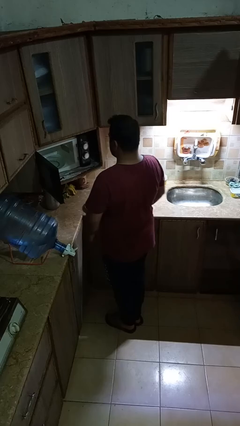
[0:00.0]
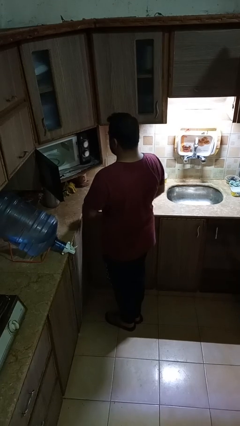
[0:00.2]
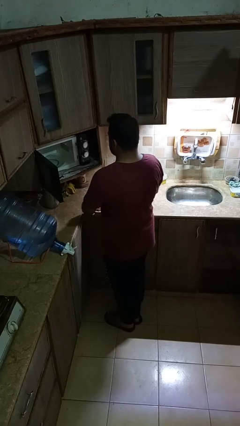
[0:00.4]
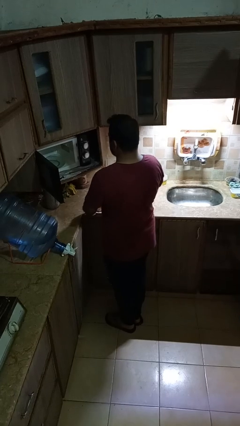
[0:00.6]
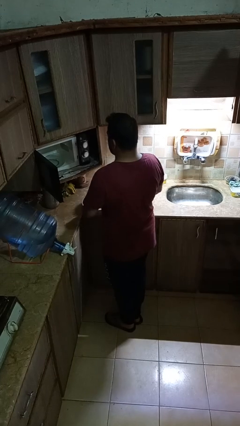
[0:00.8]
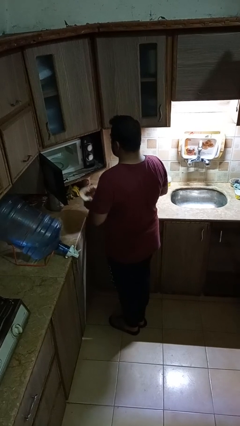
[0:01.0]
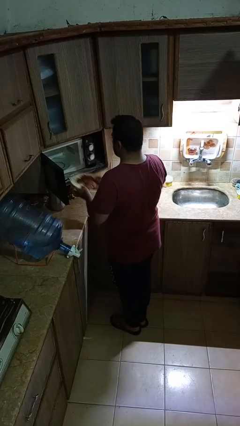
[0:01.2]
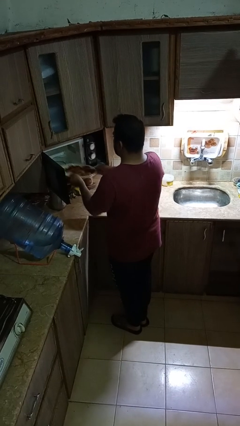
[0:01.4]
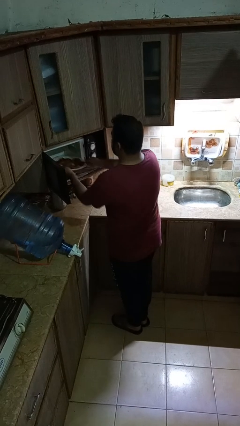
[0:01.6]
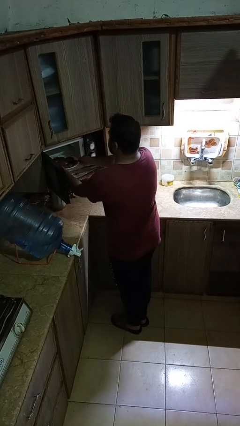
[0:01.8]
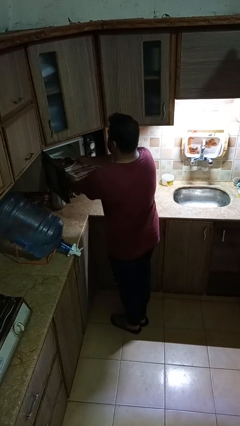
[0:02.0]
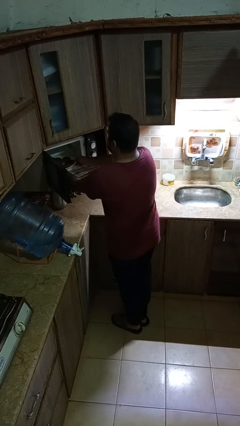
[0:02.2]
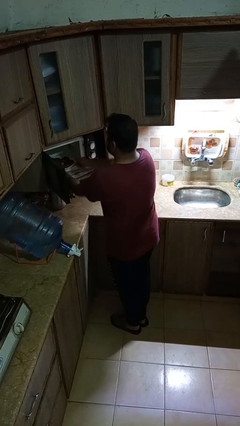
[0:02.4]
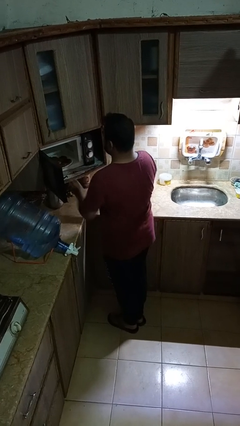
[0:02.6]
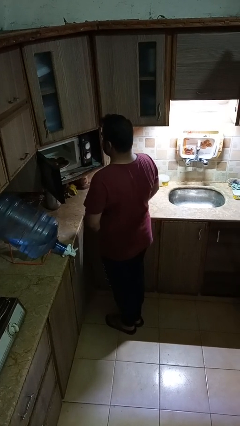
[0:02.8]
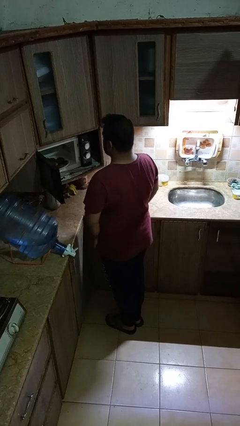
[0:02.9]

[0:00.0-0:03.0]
person puts object into microwave

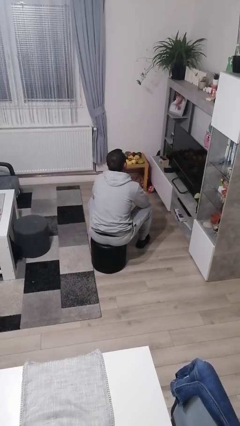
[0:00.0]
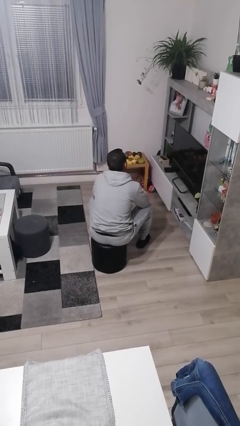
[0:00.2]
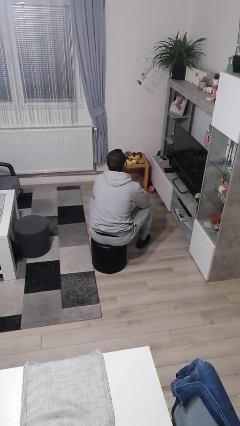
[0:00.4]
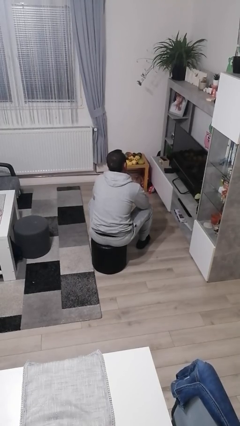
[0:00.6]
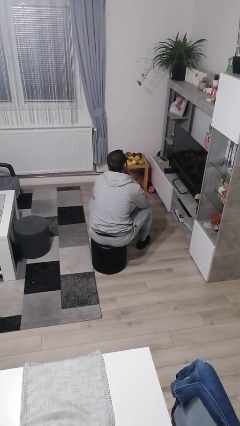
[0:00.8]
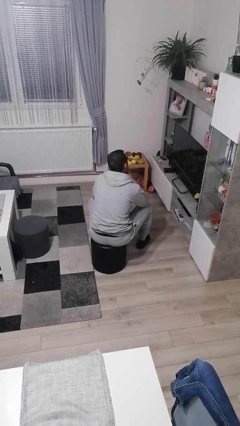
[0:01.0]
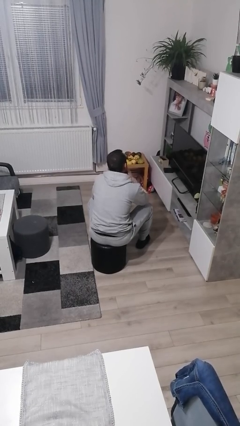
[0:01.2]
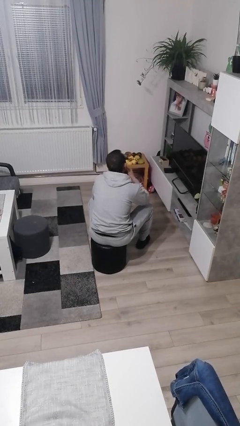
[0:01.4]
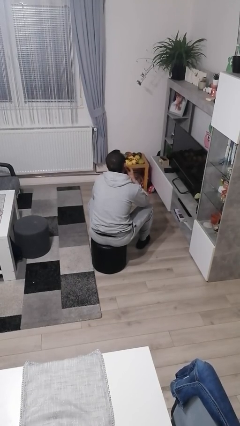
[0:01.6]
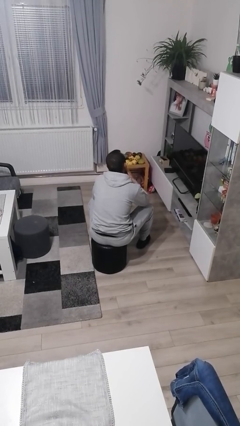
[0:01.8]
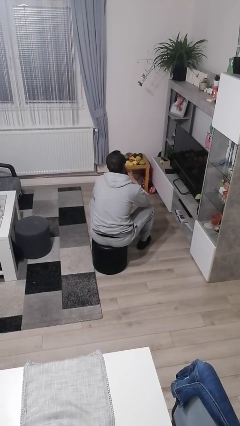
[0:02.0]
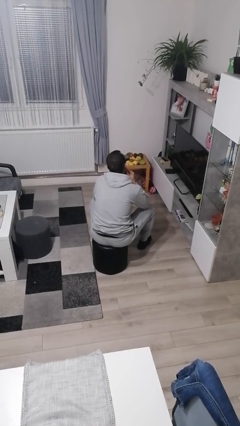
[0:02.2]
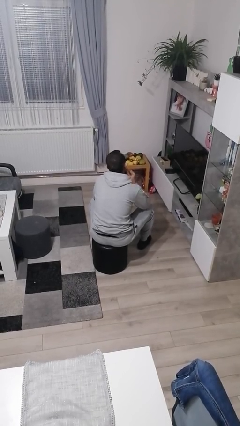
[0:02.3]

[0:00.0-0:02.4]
person strokes chin

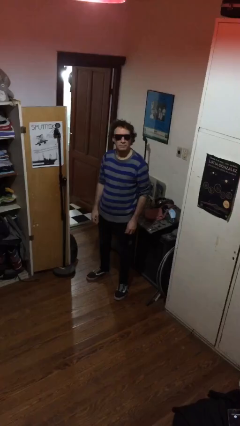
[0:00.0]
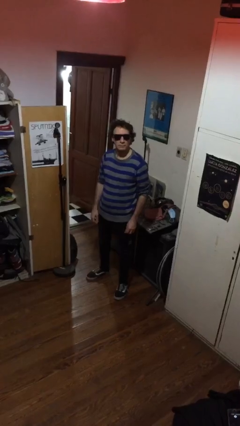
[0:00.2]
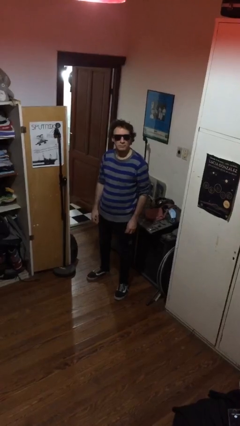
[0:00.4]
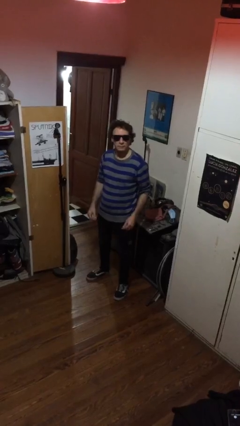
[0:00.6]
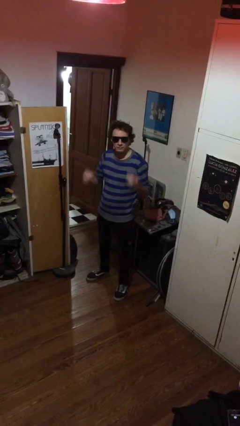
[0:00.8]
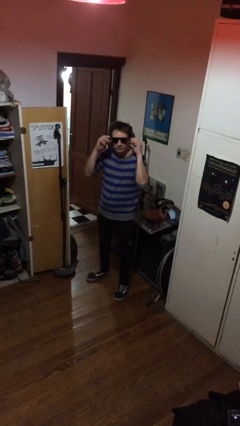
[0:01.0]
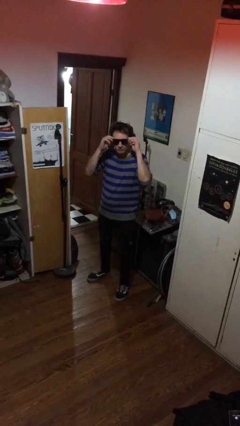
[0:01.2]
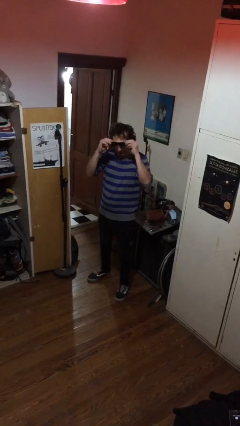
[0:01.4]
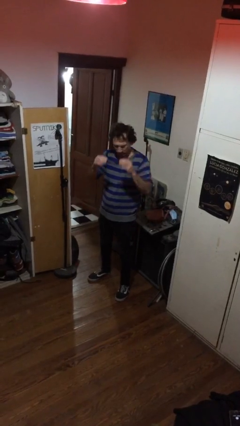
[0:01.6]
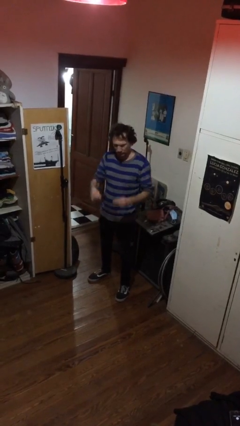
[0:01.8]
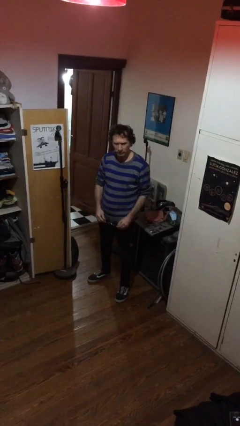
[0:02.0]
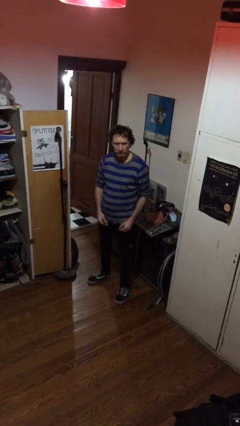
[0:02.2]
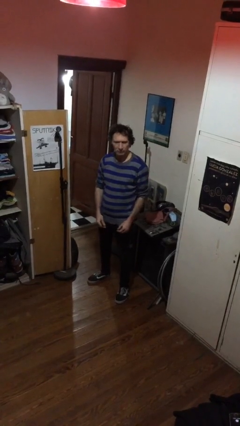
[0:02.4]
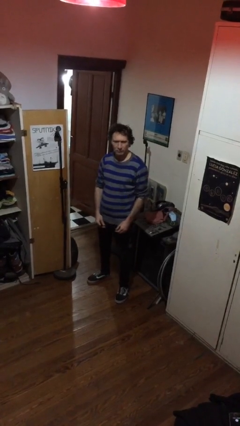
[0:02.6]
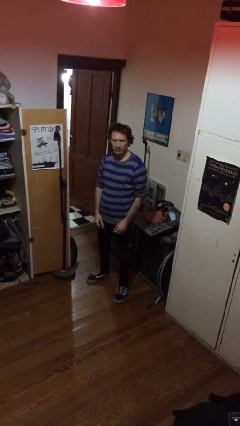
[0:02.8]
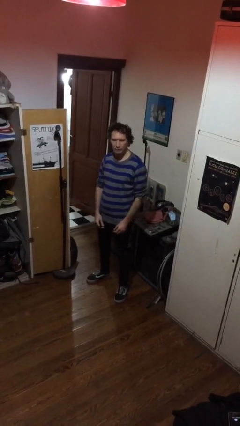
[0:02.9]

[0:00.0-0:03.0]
person takes off sunglasses

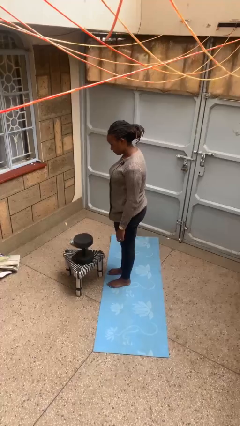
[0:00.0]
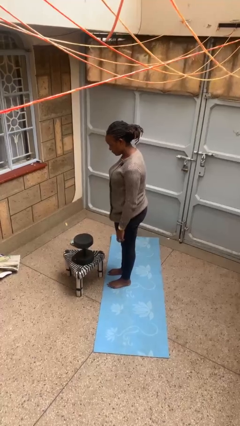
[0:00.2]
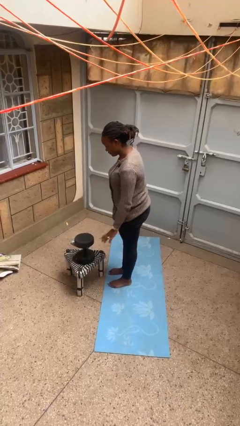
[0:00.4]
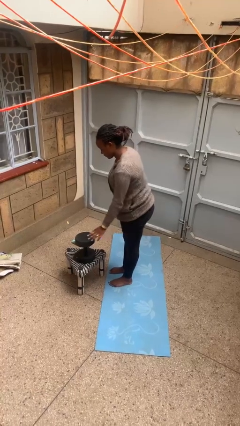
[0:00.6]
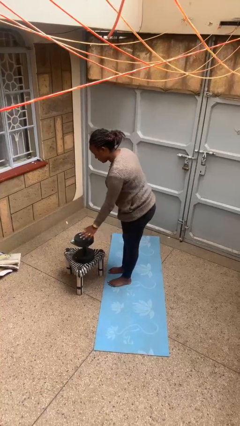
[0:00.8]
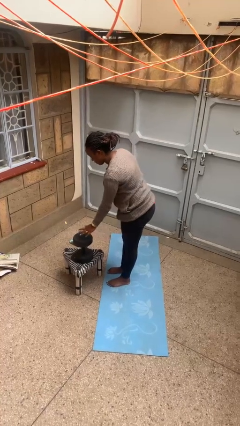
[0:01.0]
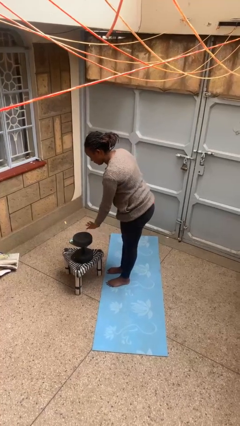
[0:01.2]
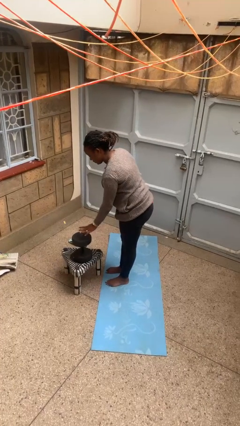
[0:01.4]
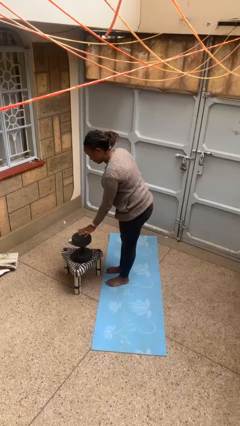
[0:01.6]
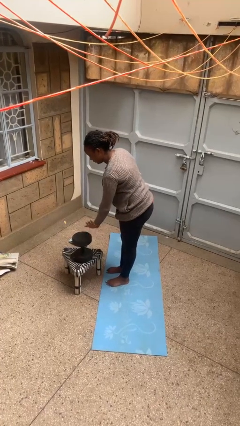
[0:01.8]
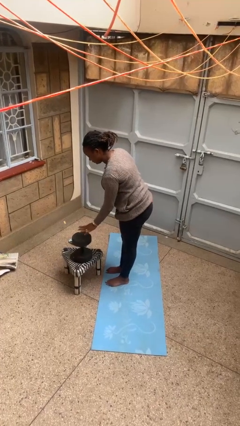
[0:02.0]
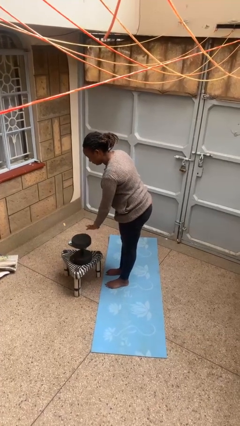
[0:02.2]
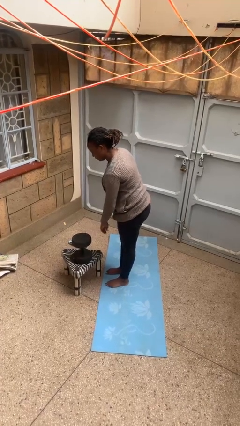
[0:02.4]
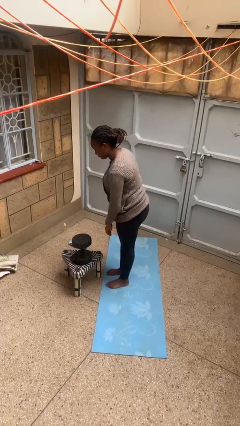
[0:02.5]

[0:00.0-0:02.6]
person waves hand over object

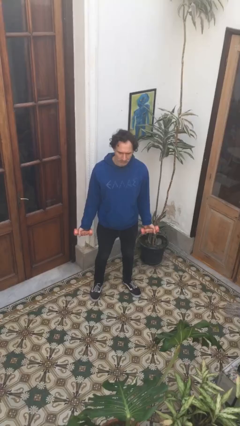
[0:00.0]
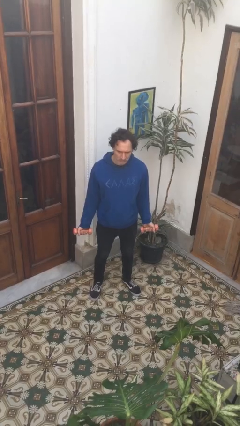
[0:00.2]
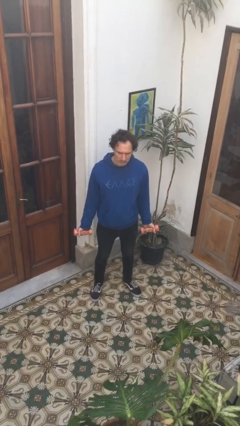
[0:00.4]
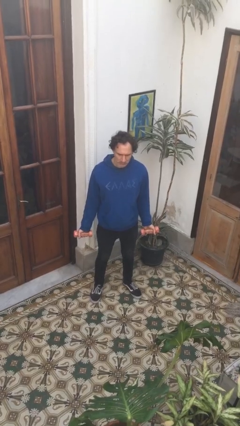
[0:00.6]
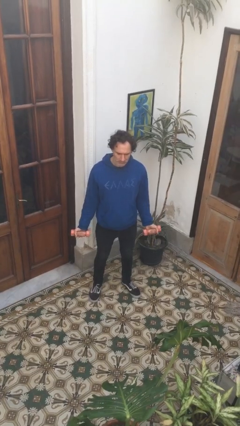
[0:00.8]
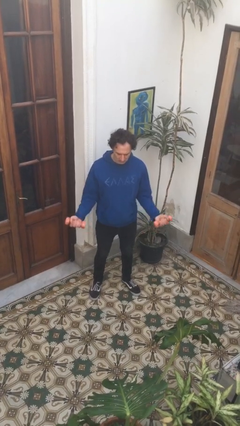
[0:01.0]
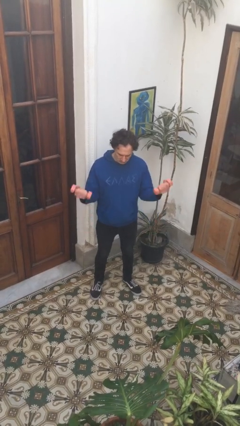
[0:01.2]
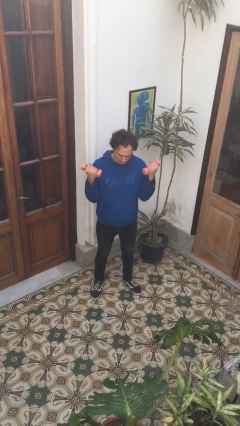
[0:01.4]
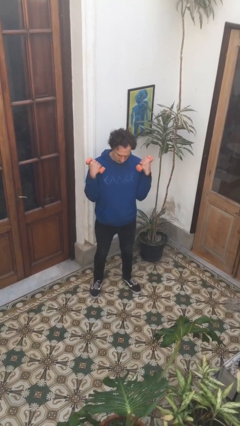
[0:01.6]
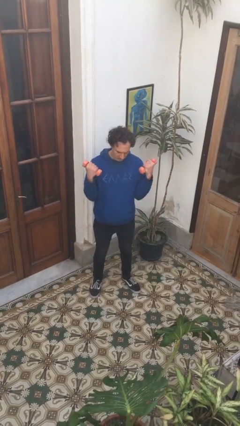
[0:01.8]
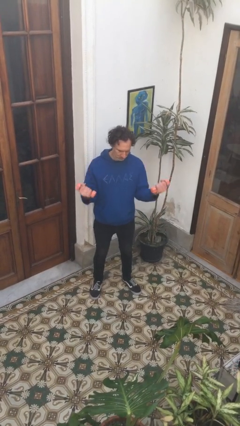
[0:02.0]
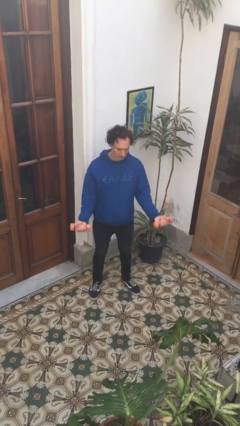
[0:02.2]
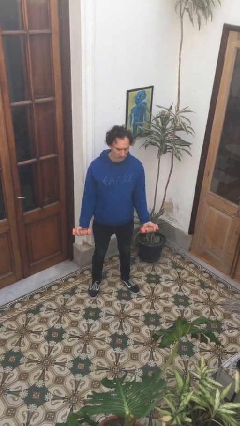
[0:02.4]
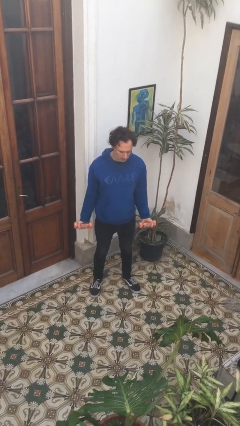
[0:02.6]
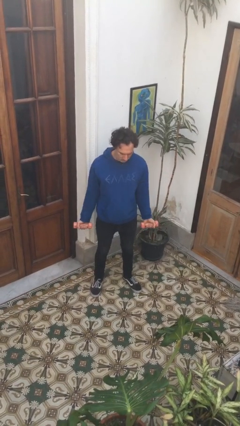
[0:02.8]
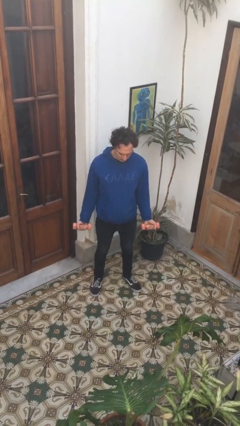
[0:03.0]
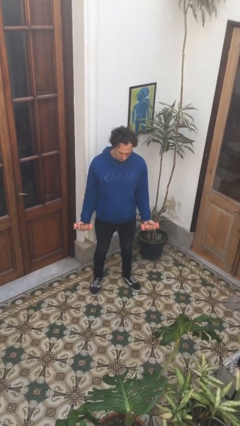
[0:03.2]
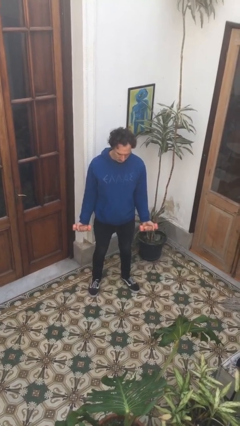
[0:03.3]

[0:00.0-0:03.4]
person lifts dumbbells

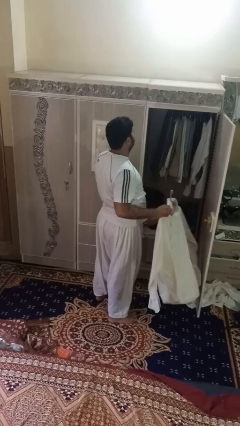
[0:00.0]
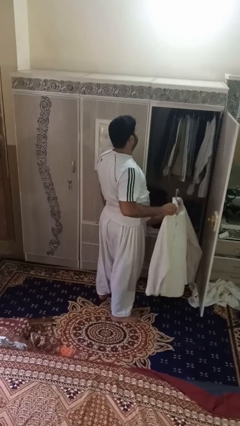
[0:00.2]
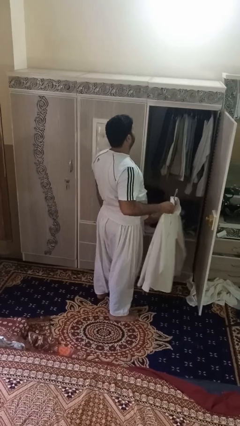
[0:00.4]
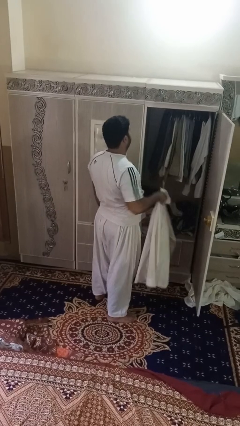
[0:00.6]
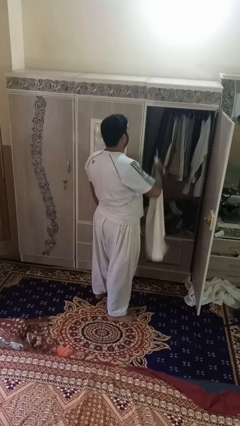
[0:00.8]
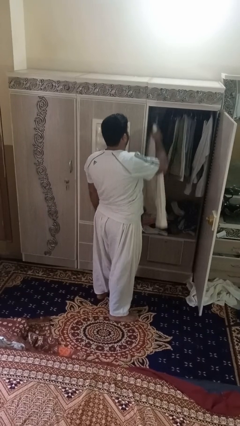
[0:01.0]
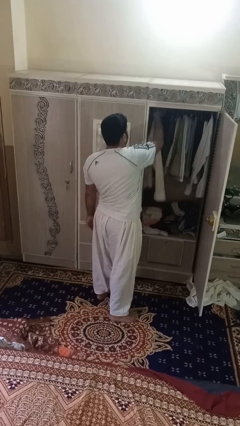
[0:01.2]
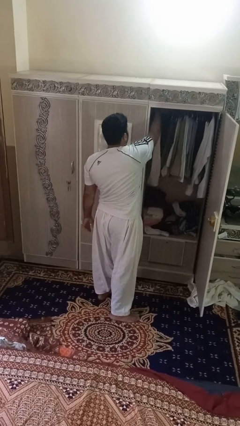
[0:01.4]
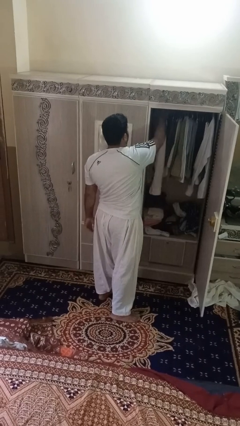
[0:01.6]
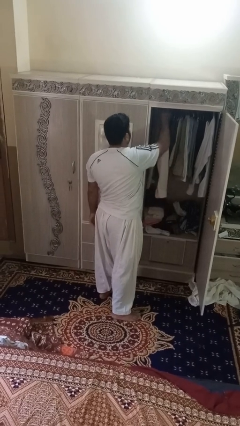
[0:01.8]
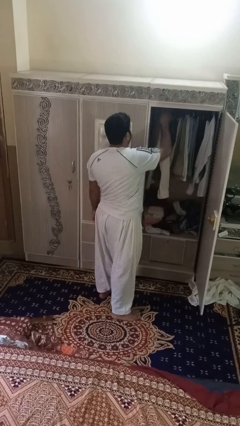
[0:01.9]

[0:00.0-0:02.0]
person puts clothes into closet

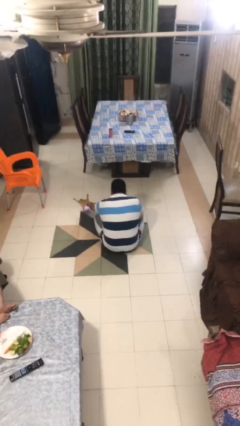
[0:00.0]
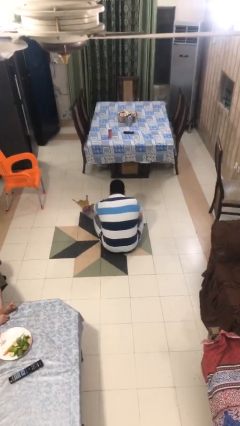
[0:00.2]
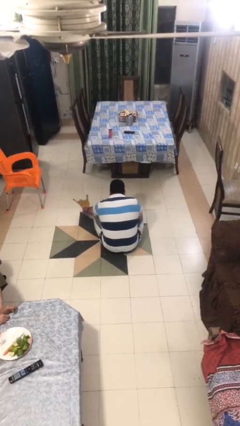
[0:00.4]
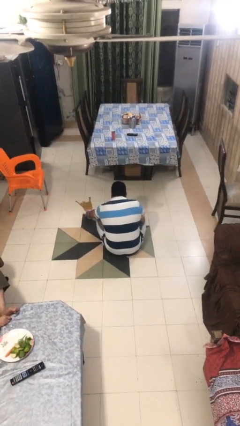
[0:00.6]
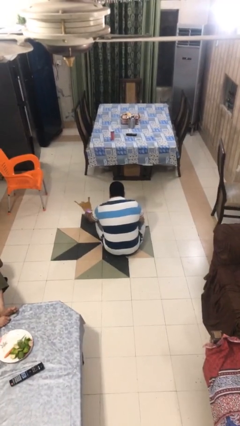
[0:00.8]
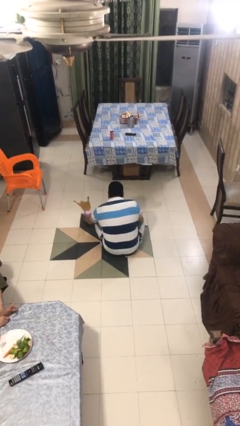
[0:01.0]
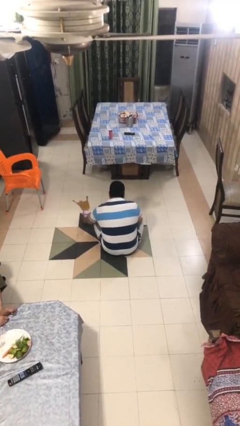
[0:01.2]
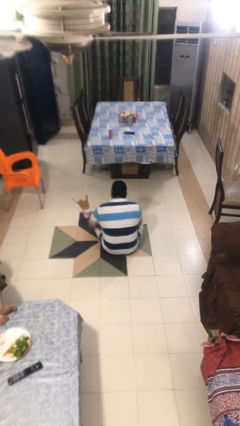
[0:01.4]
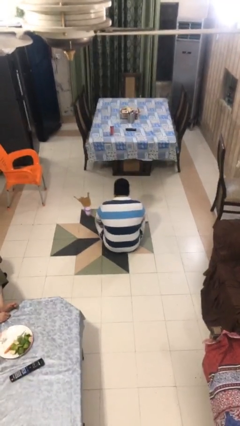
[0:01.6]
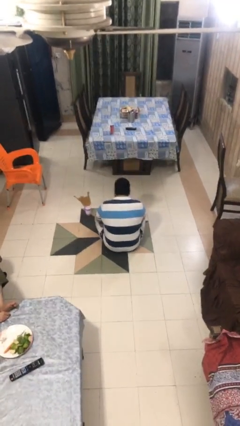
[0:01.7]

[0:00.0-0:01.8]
person sets upright glass
